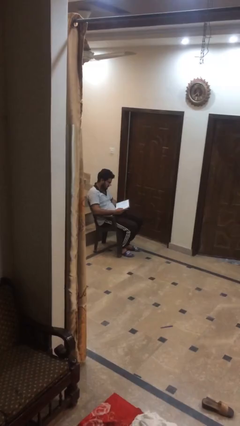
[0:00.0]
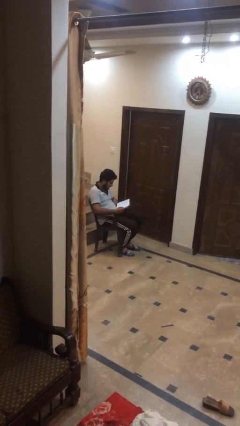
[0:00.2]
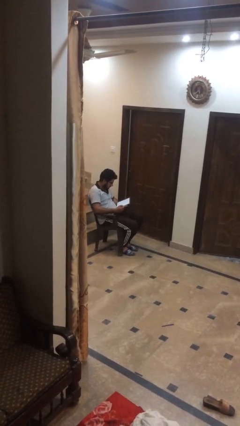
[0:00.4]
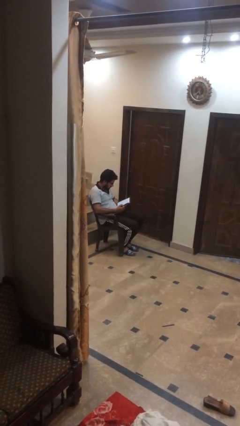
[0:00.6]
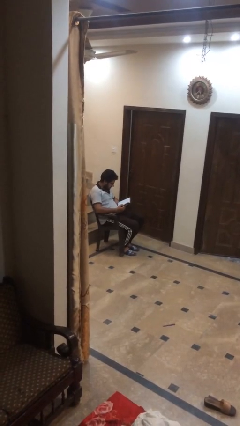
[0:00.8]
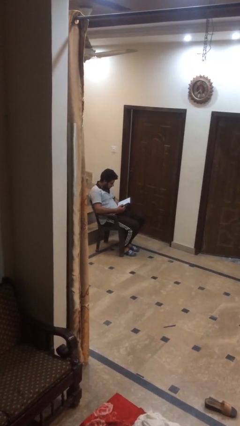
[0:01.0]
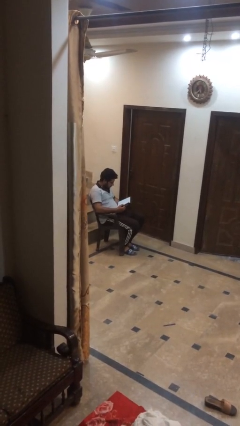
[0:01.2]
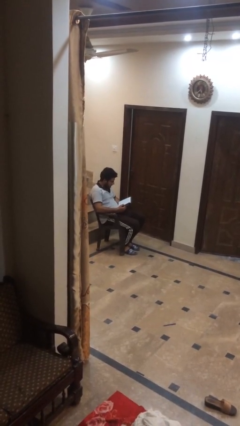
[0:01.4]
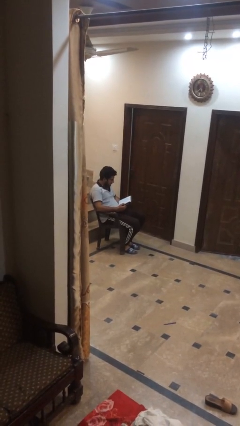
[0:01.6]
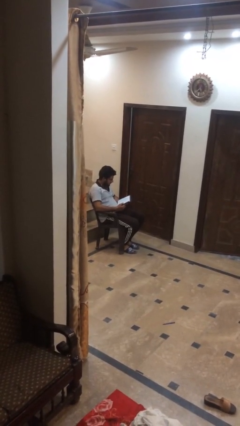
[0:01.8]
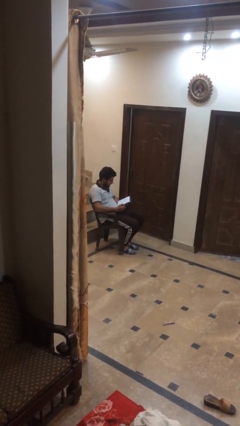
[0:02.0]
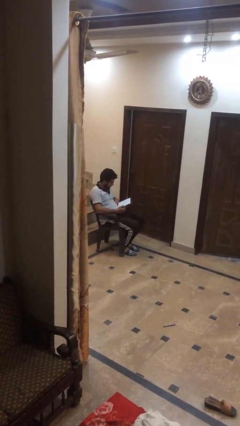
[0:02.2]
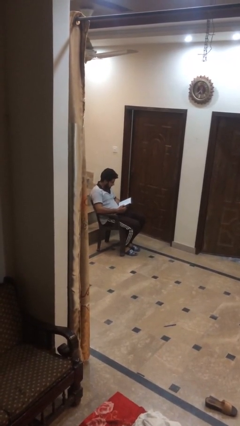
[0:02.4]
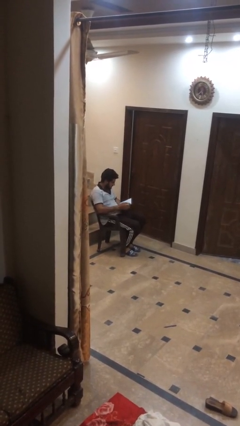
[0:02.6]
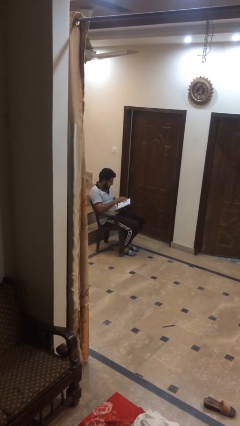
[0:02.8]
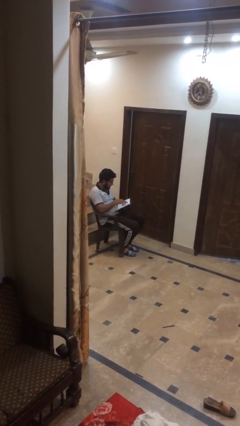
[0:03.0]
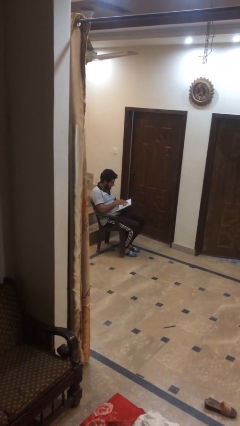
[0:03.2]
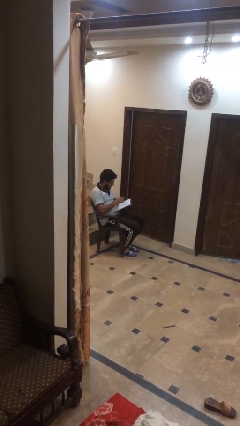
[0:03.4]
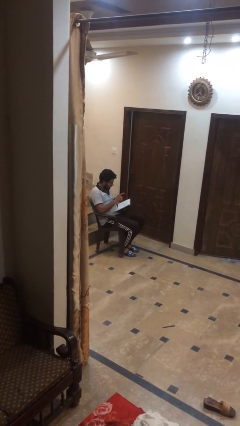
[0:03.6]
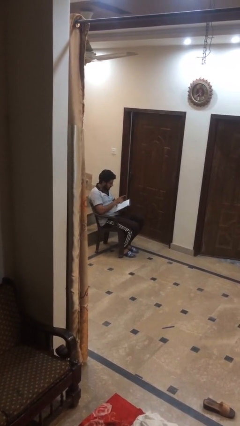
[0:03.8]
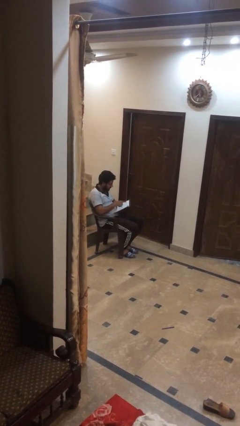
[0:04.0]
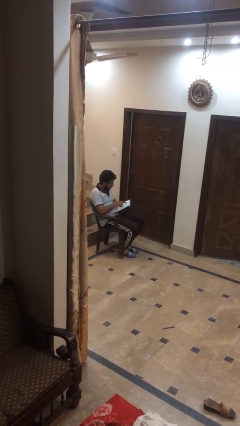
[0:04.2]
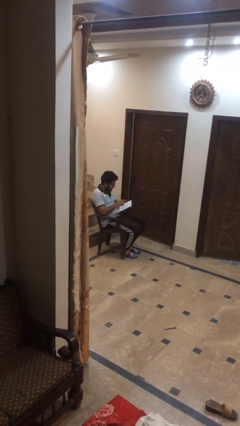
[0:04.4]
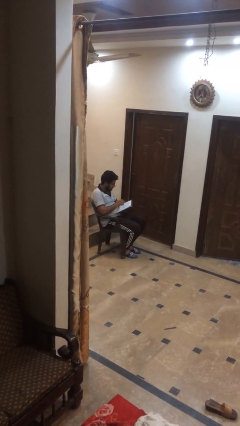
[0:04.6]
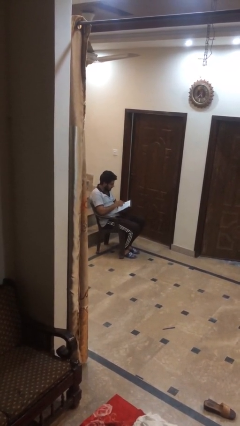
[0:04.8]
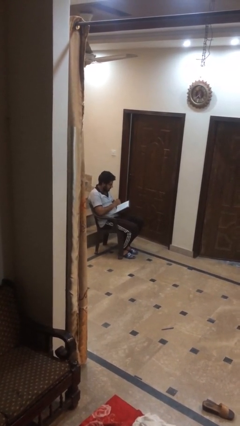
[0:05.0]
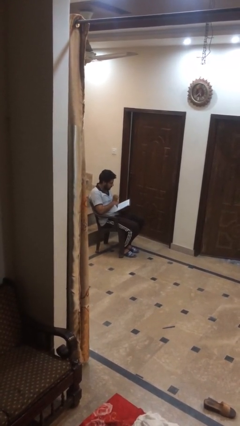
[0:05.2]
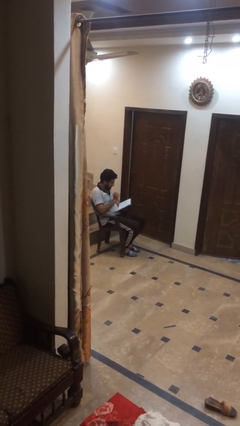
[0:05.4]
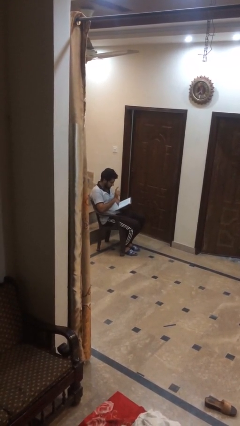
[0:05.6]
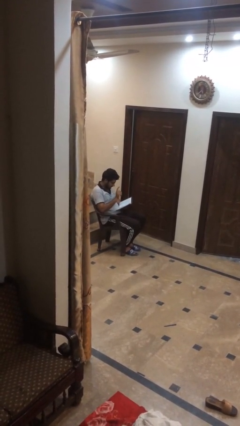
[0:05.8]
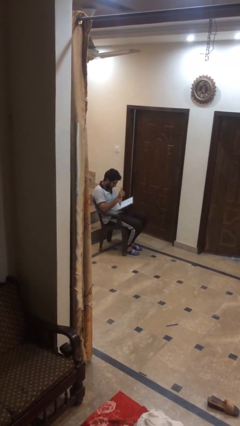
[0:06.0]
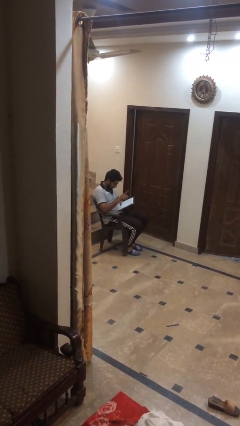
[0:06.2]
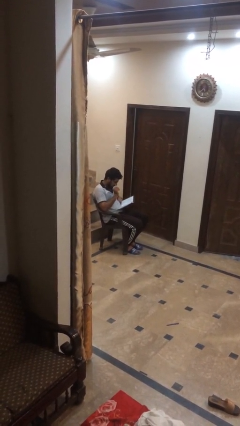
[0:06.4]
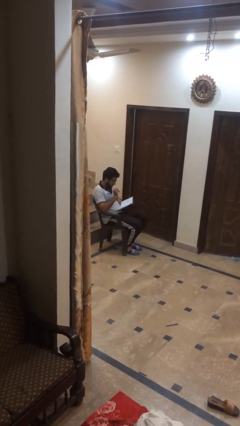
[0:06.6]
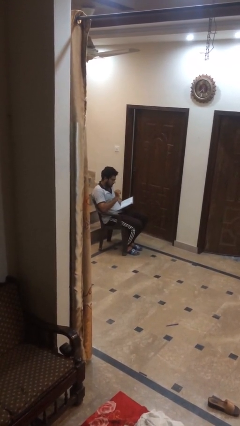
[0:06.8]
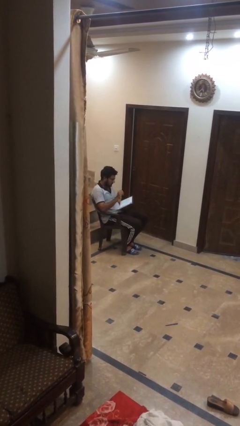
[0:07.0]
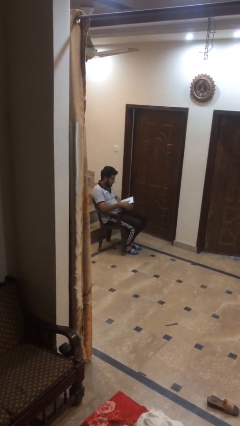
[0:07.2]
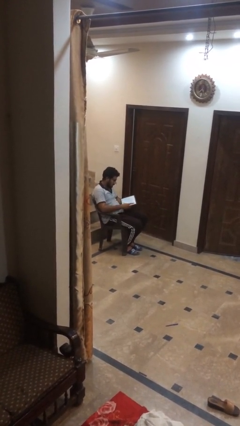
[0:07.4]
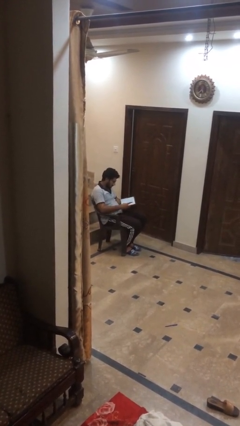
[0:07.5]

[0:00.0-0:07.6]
person reads document

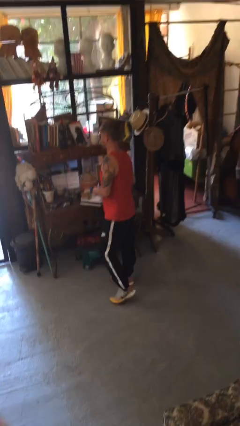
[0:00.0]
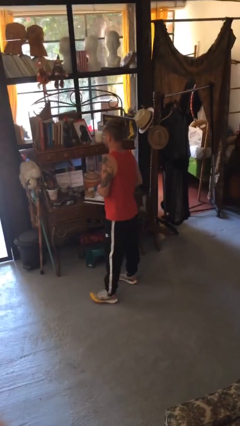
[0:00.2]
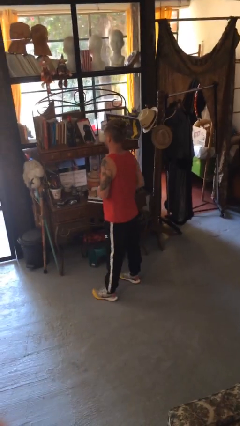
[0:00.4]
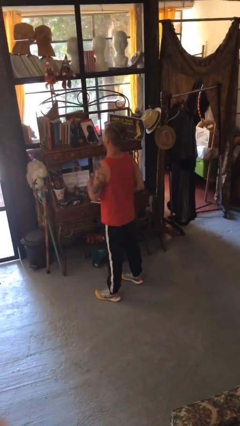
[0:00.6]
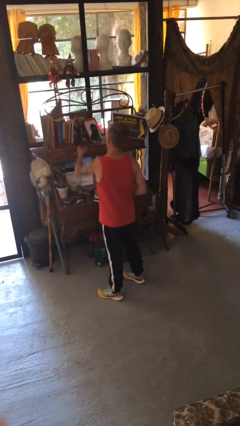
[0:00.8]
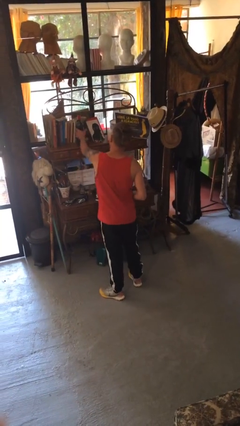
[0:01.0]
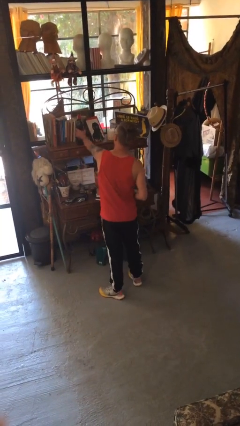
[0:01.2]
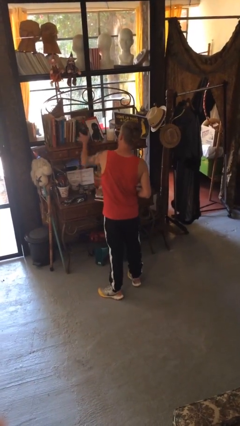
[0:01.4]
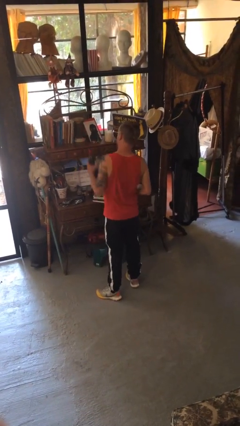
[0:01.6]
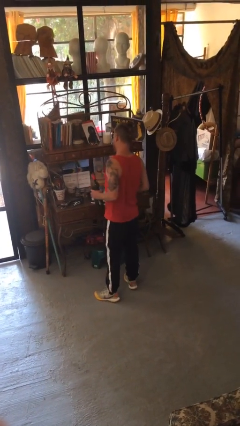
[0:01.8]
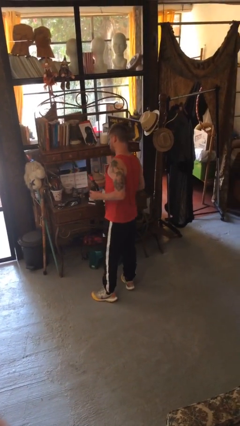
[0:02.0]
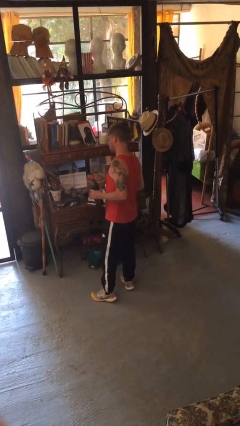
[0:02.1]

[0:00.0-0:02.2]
person picks up object from shelf

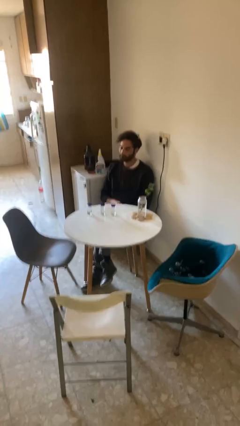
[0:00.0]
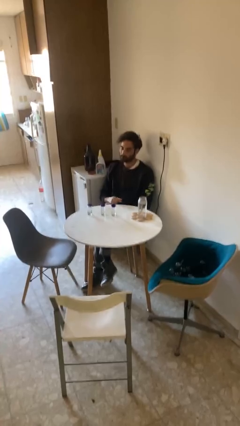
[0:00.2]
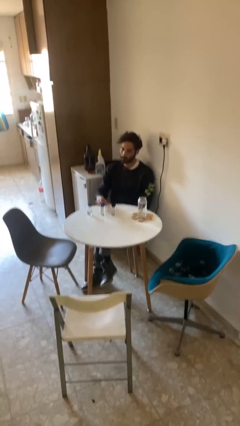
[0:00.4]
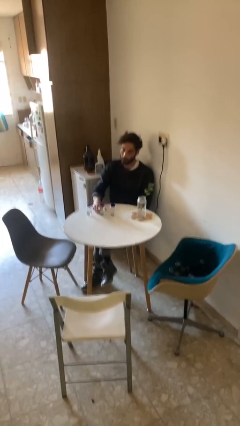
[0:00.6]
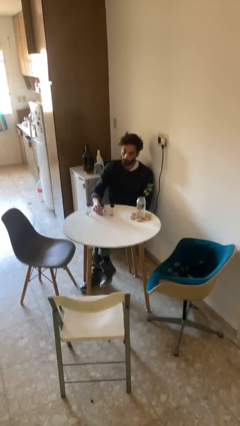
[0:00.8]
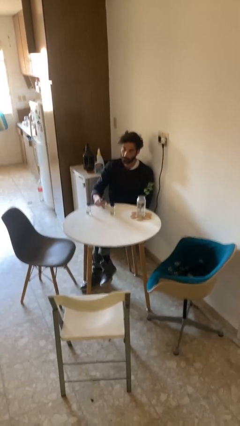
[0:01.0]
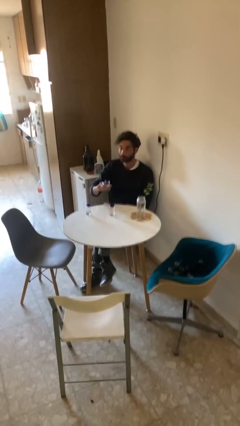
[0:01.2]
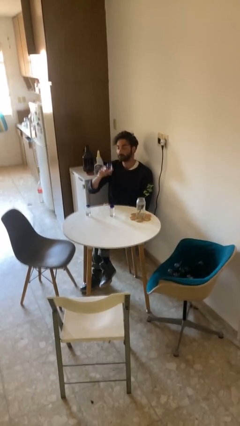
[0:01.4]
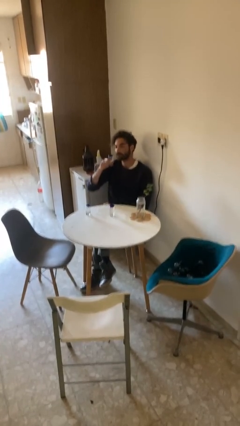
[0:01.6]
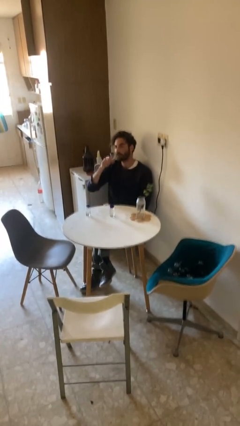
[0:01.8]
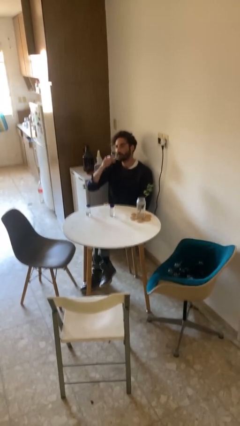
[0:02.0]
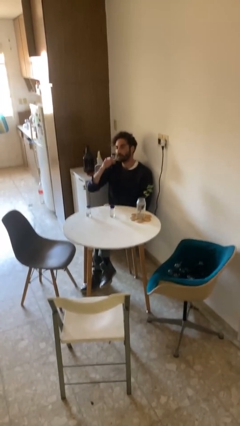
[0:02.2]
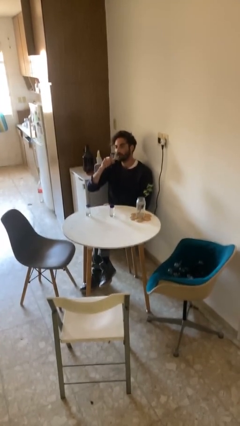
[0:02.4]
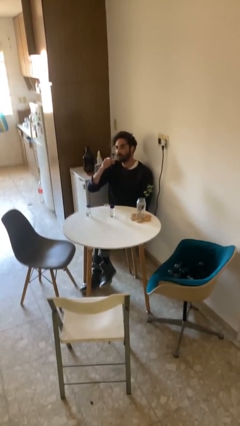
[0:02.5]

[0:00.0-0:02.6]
person picks up object from table

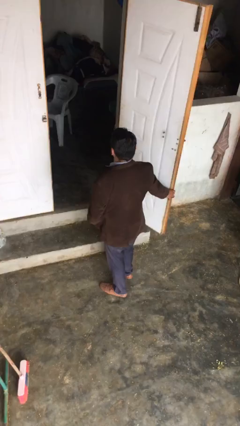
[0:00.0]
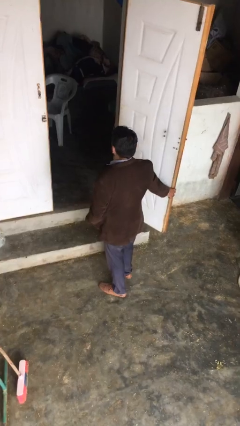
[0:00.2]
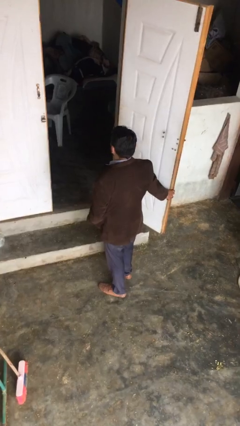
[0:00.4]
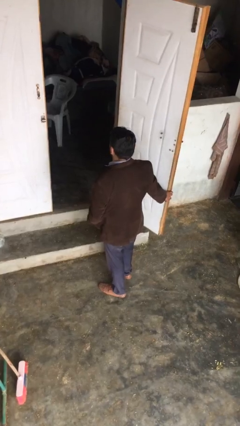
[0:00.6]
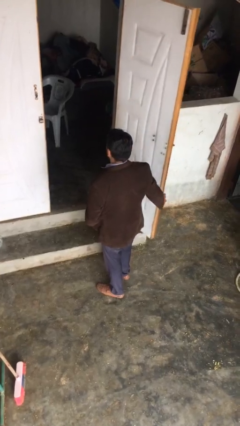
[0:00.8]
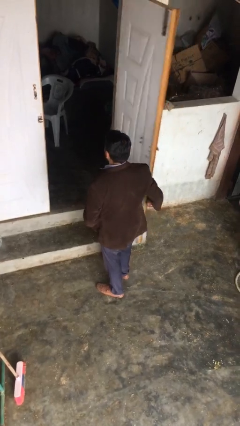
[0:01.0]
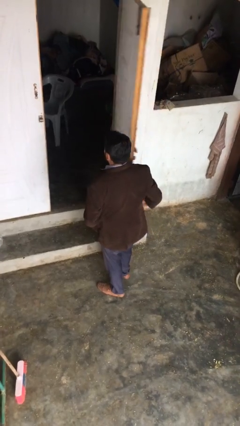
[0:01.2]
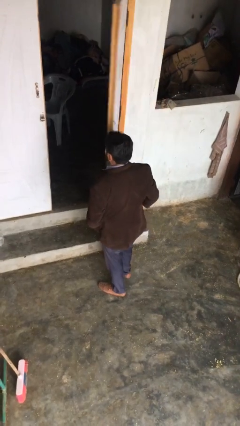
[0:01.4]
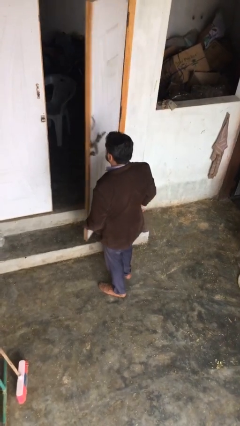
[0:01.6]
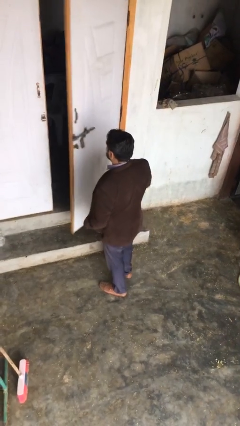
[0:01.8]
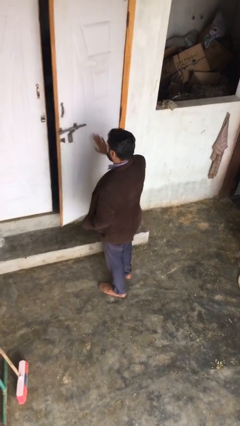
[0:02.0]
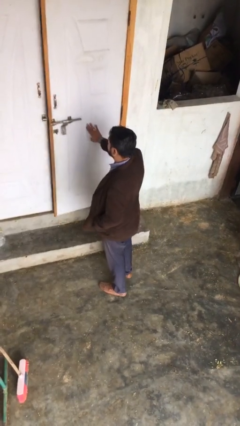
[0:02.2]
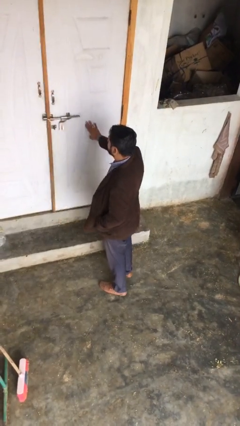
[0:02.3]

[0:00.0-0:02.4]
person closes facility door

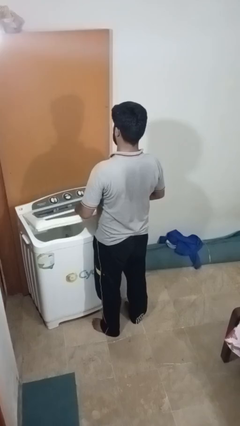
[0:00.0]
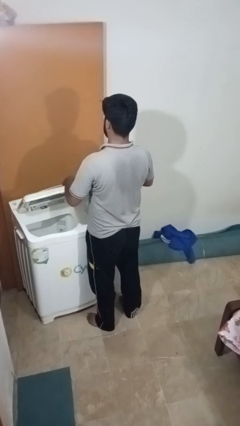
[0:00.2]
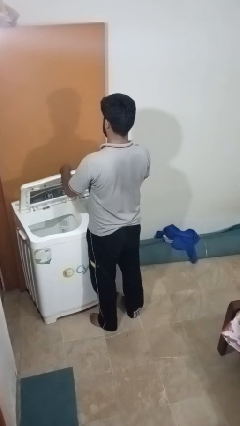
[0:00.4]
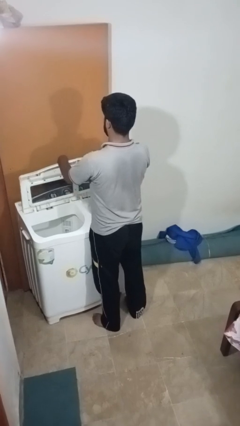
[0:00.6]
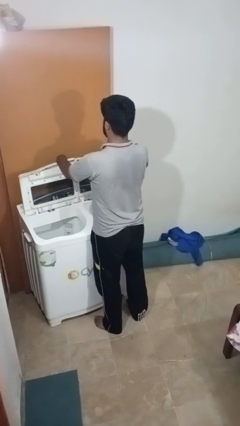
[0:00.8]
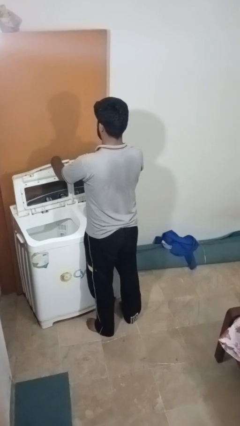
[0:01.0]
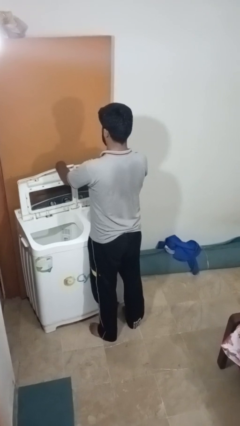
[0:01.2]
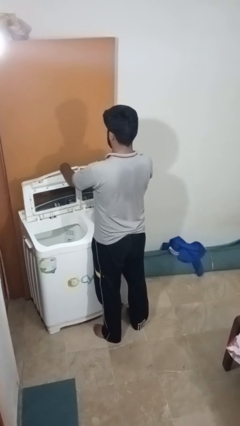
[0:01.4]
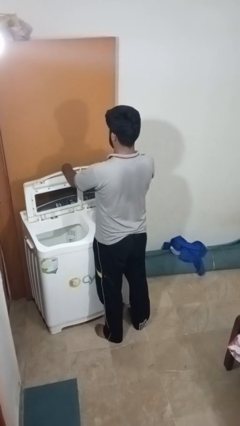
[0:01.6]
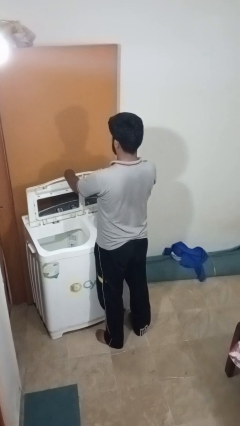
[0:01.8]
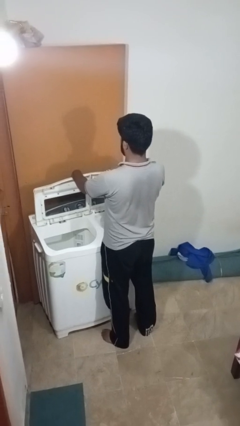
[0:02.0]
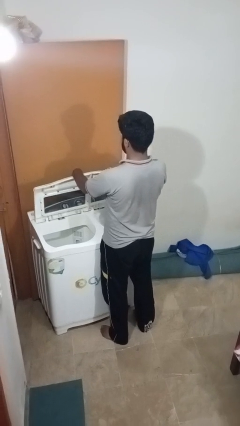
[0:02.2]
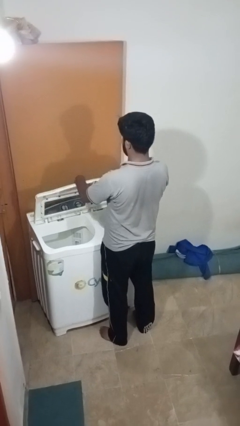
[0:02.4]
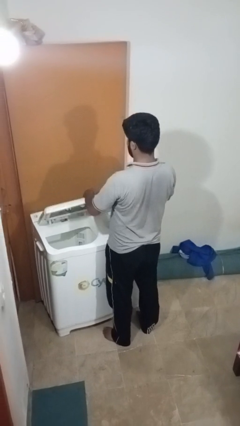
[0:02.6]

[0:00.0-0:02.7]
person opens clothes washer
